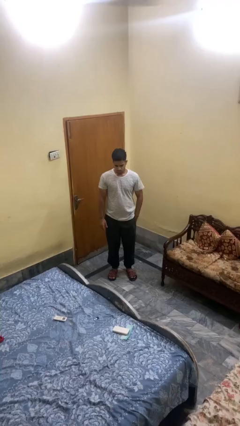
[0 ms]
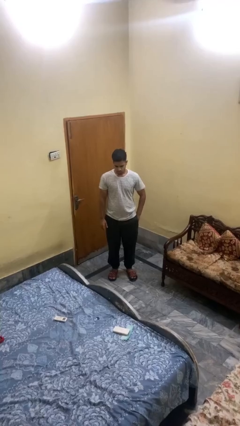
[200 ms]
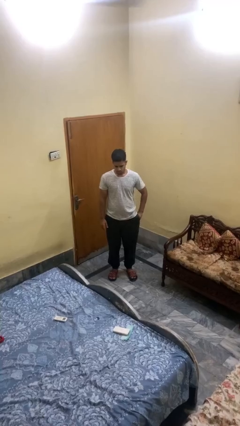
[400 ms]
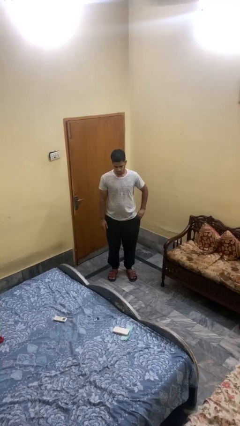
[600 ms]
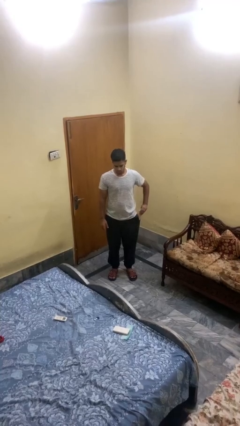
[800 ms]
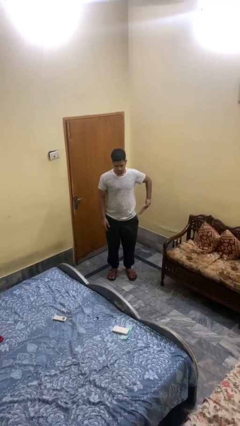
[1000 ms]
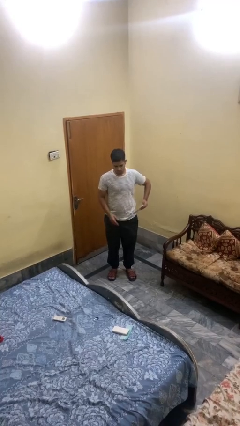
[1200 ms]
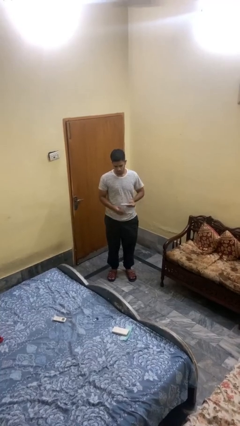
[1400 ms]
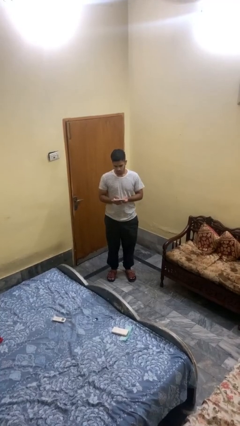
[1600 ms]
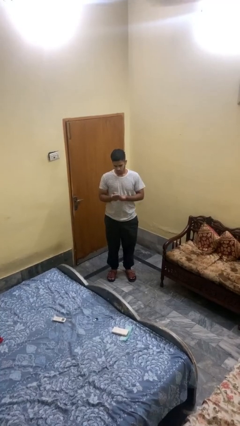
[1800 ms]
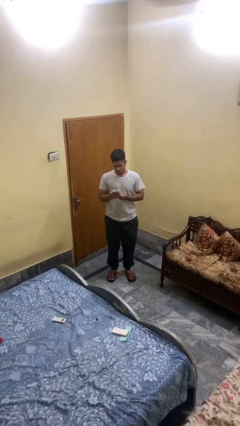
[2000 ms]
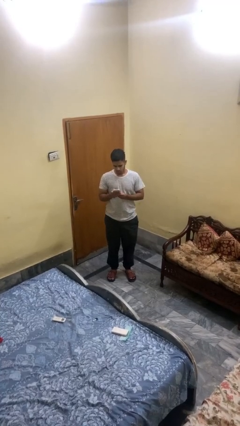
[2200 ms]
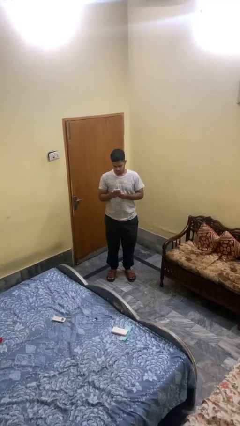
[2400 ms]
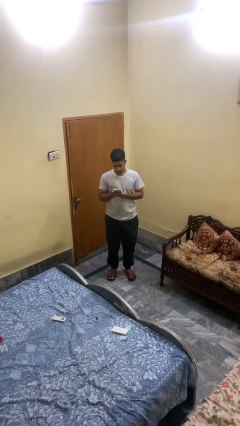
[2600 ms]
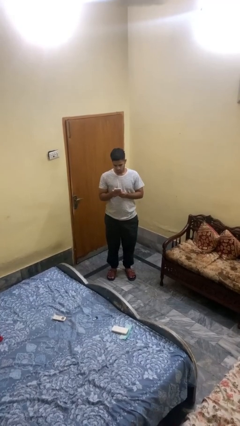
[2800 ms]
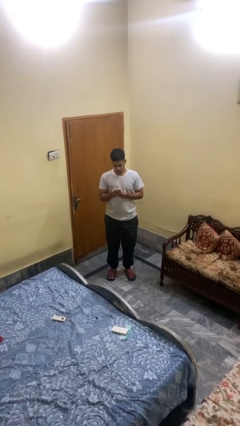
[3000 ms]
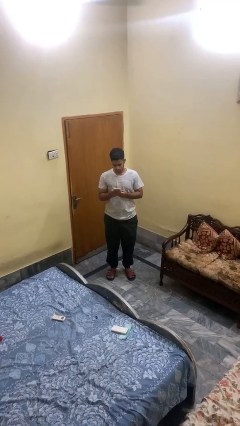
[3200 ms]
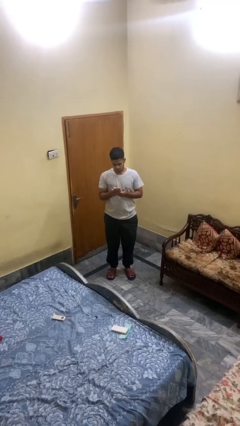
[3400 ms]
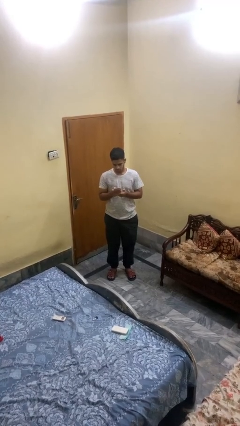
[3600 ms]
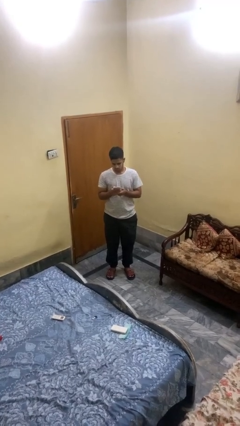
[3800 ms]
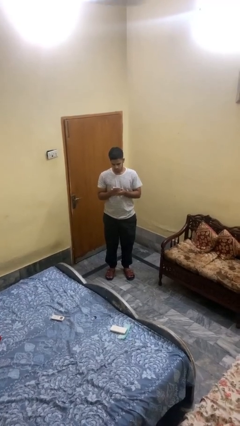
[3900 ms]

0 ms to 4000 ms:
person takes phone from pocket

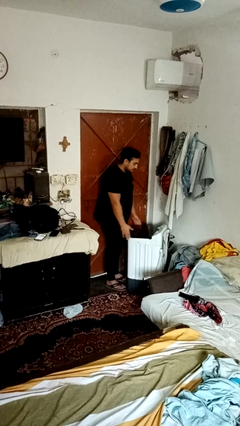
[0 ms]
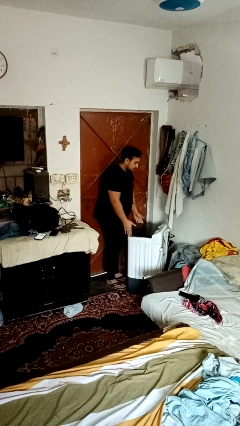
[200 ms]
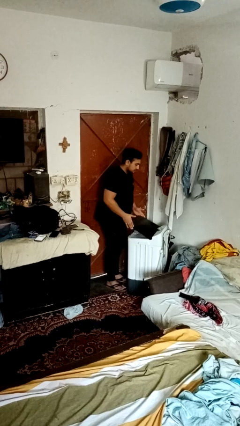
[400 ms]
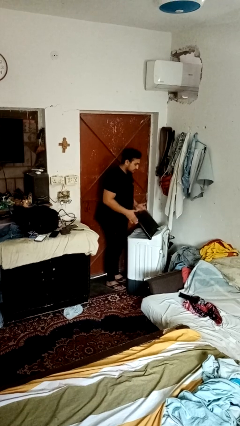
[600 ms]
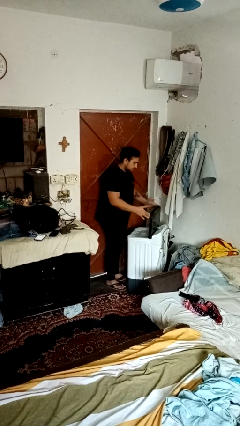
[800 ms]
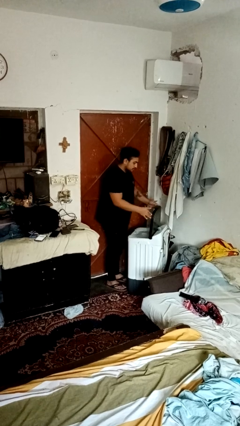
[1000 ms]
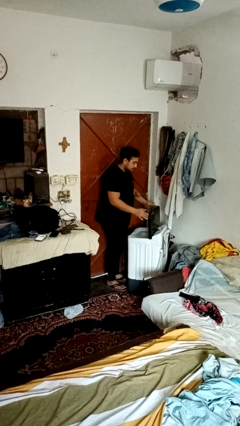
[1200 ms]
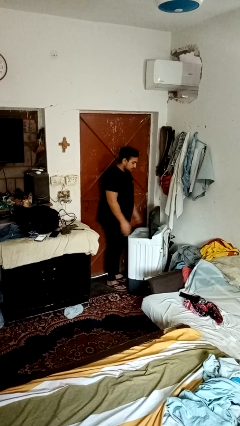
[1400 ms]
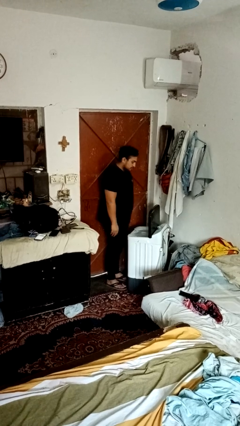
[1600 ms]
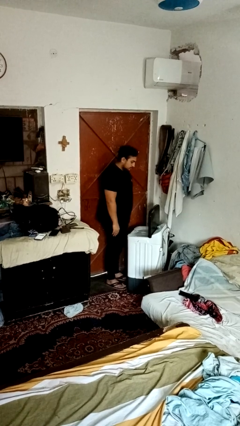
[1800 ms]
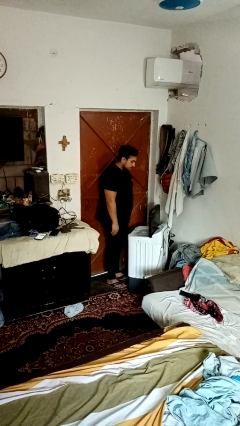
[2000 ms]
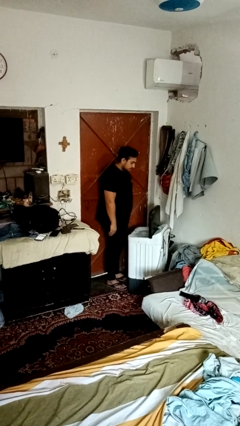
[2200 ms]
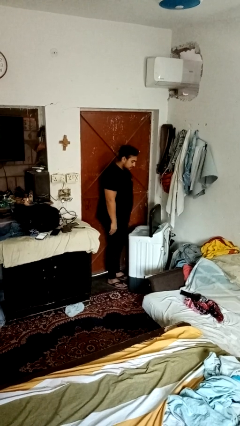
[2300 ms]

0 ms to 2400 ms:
person opens clothes washer

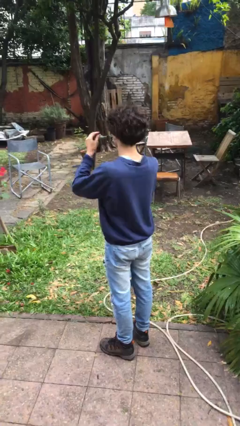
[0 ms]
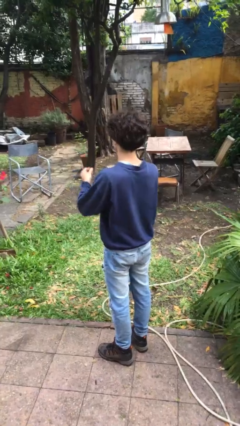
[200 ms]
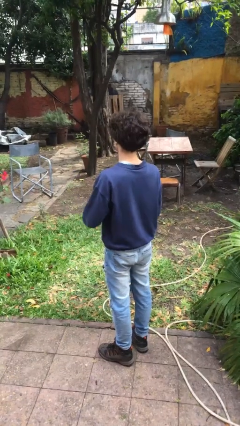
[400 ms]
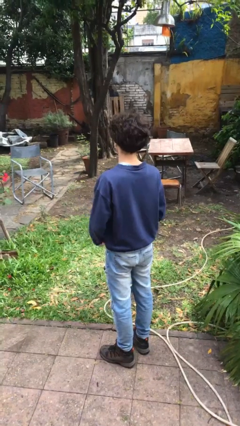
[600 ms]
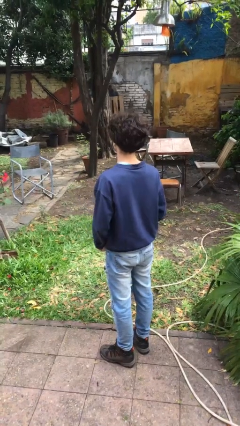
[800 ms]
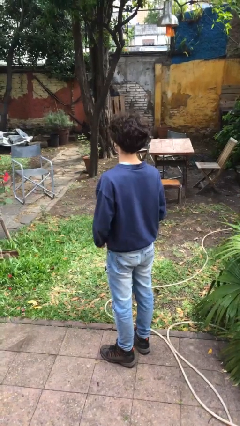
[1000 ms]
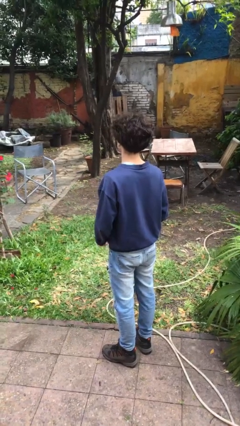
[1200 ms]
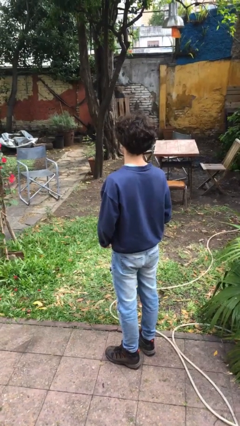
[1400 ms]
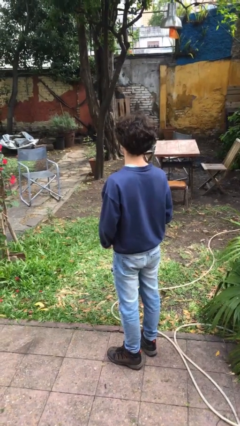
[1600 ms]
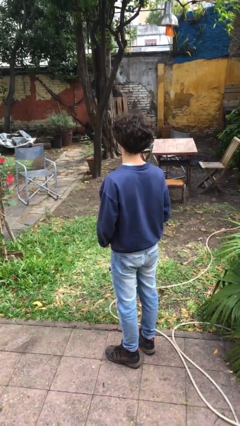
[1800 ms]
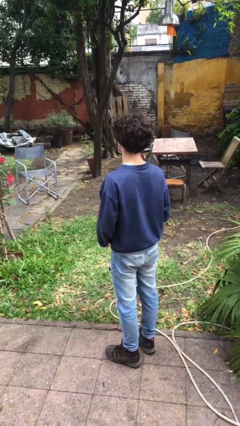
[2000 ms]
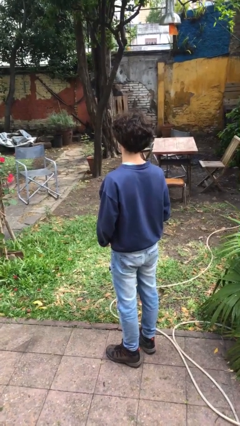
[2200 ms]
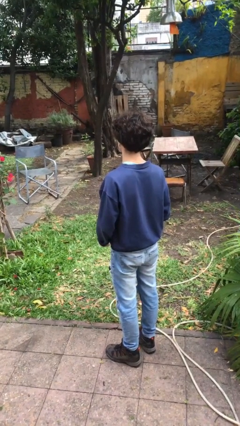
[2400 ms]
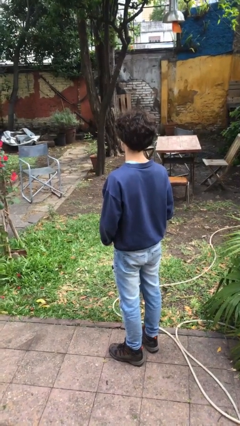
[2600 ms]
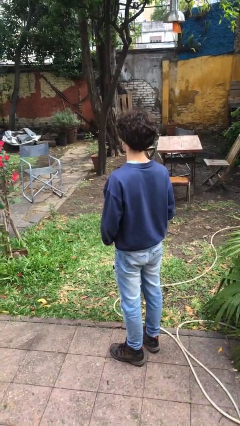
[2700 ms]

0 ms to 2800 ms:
person takes off glasses

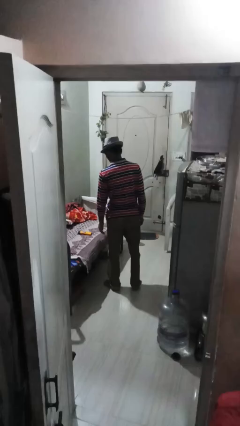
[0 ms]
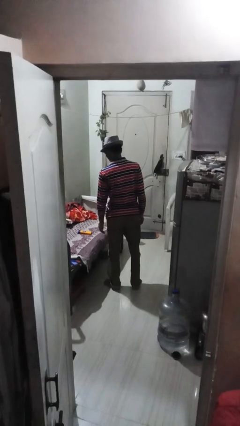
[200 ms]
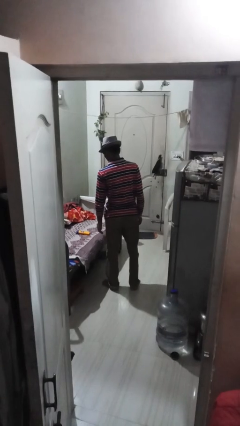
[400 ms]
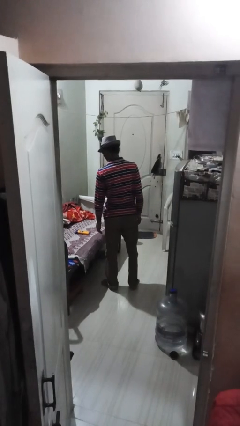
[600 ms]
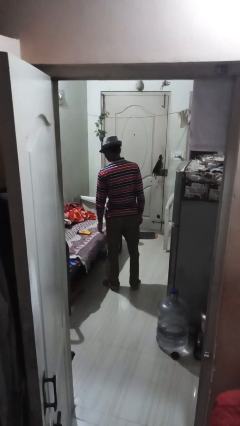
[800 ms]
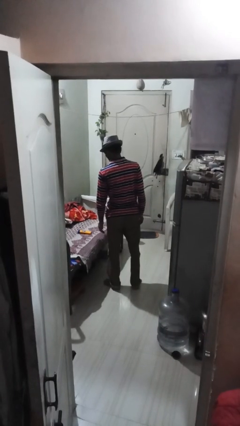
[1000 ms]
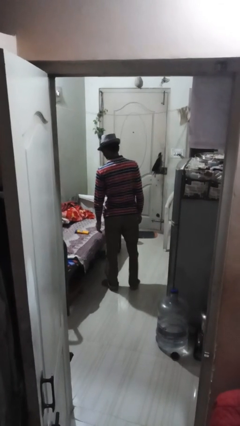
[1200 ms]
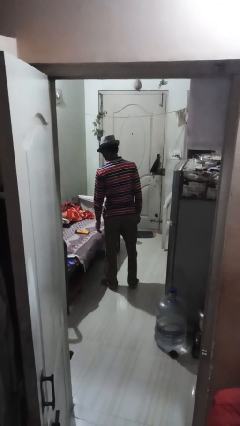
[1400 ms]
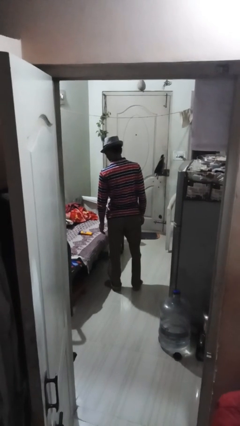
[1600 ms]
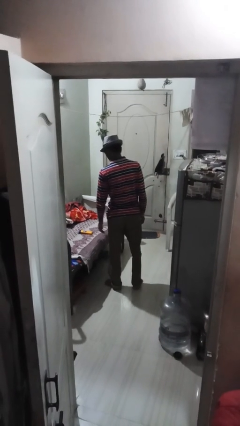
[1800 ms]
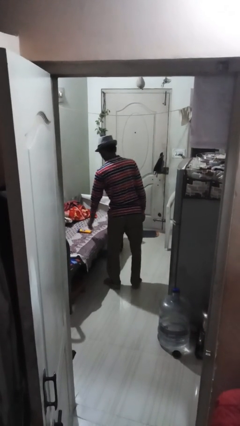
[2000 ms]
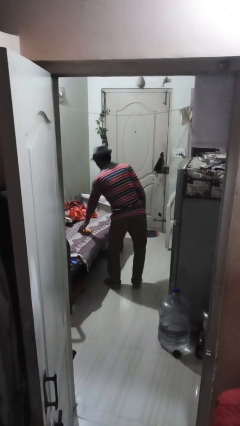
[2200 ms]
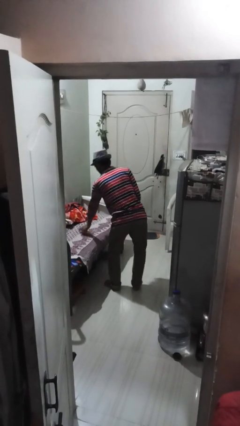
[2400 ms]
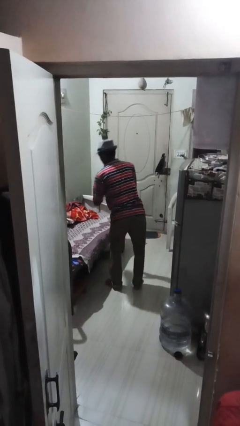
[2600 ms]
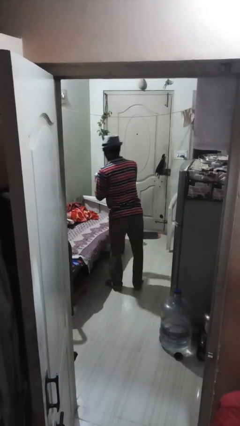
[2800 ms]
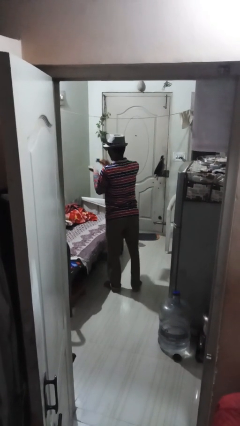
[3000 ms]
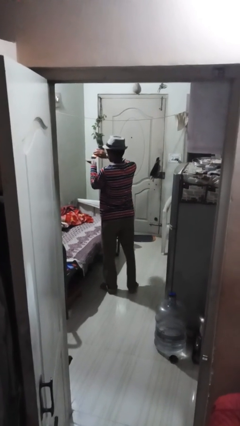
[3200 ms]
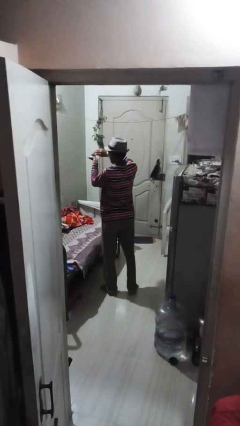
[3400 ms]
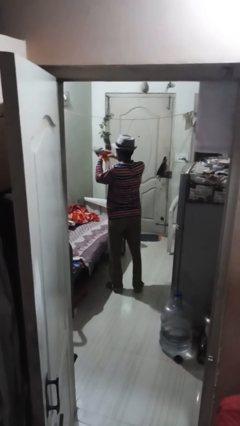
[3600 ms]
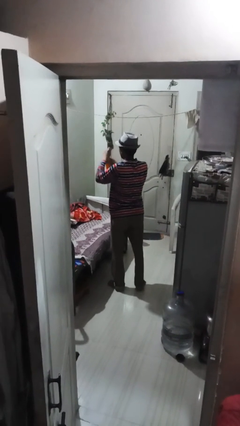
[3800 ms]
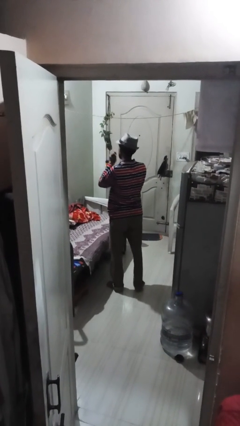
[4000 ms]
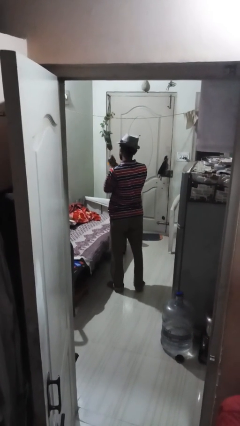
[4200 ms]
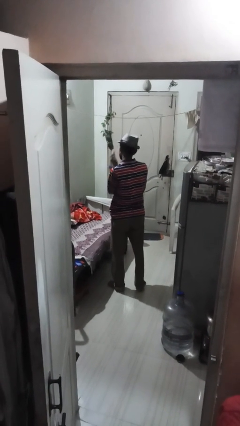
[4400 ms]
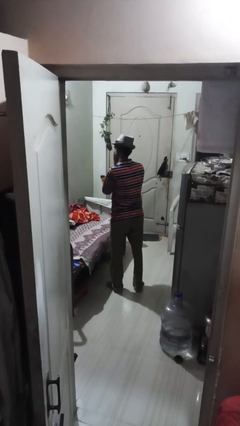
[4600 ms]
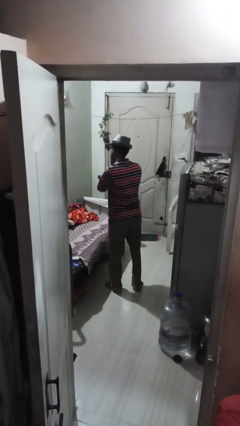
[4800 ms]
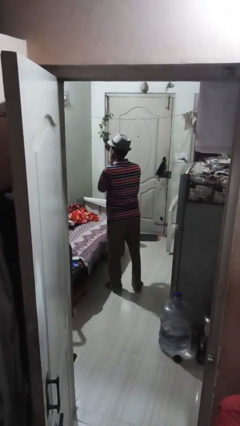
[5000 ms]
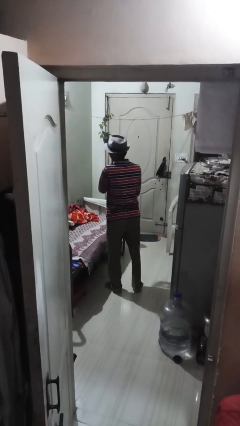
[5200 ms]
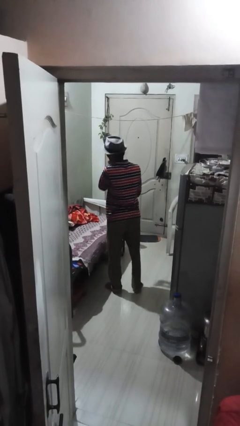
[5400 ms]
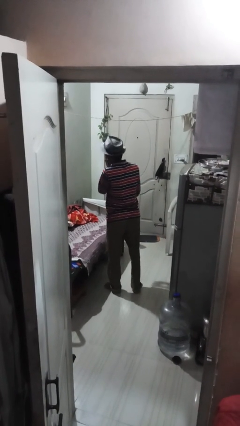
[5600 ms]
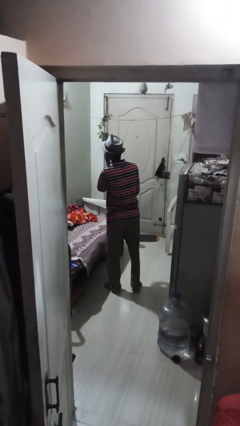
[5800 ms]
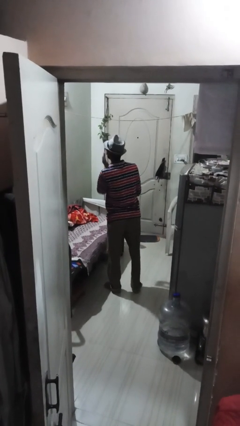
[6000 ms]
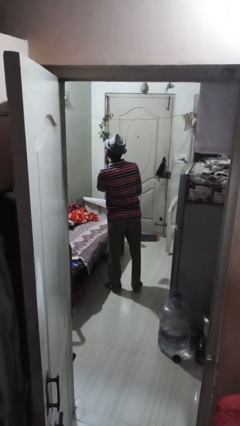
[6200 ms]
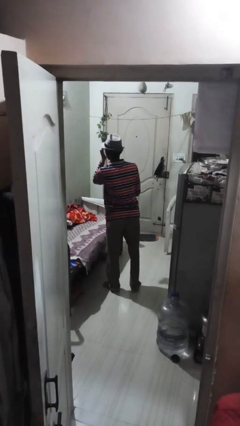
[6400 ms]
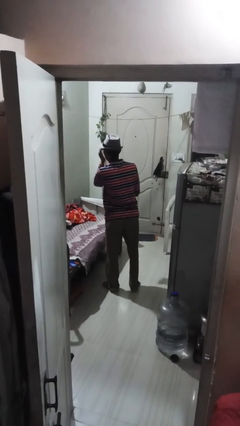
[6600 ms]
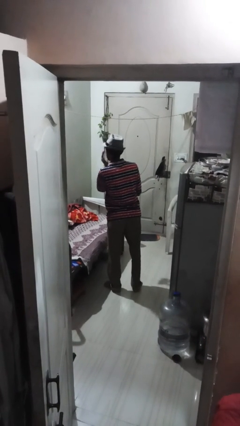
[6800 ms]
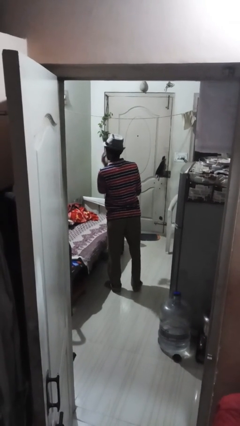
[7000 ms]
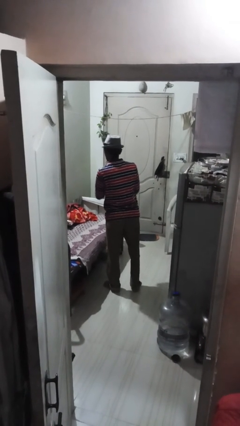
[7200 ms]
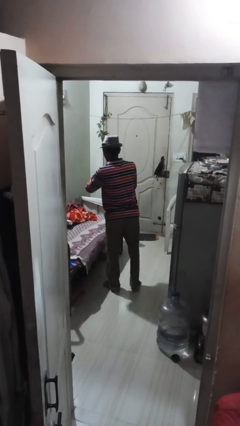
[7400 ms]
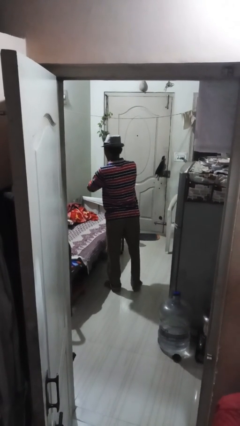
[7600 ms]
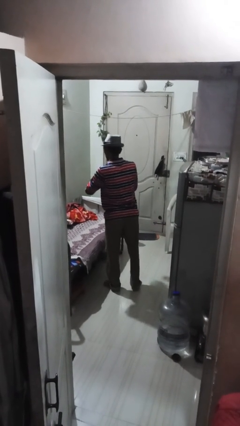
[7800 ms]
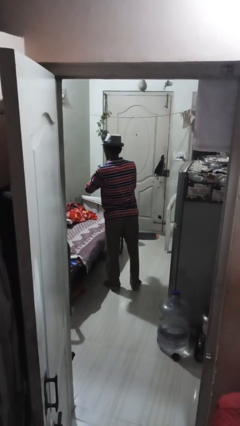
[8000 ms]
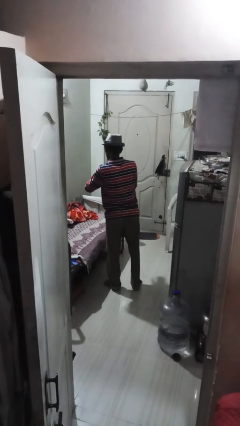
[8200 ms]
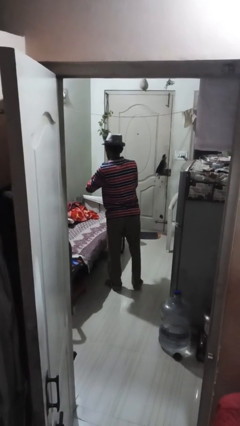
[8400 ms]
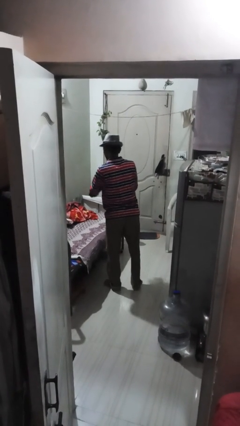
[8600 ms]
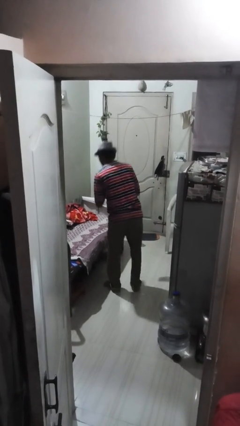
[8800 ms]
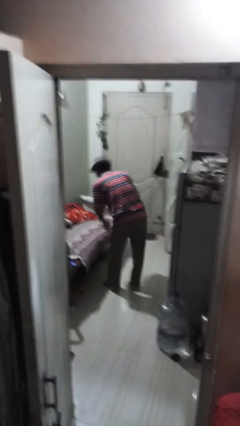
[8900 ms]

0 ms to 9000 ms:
person applies sunscreen
